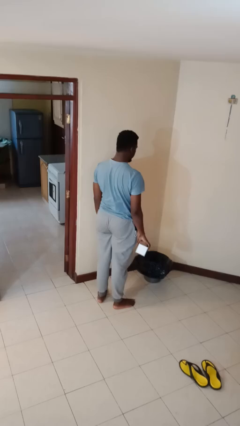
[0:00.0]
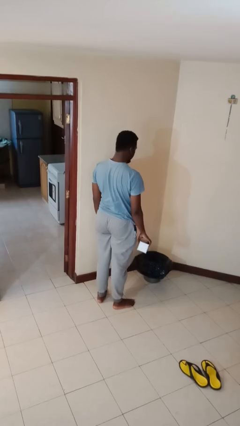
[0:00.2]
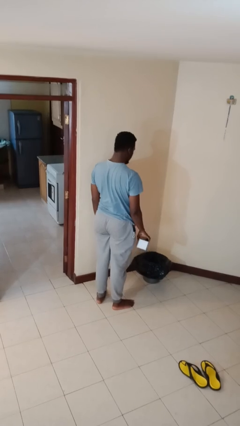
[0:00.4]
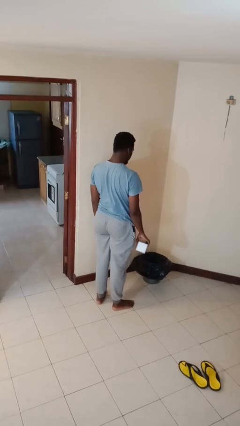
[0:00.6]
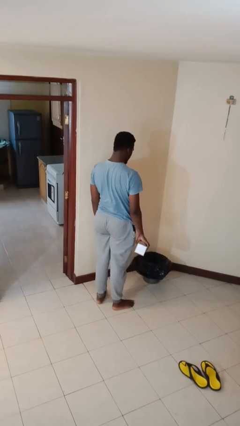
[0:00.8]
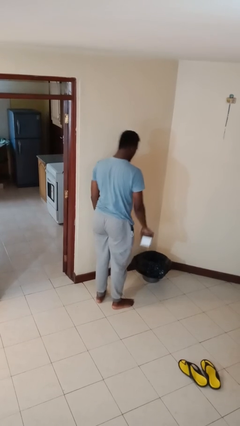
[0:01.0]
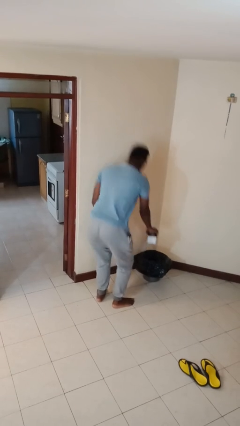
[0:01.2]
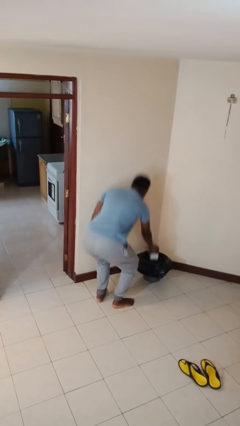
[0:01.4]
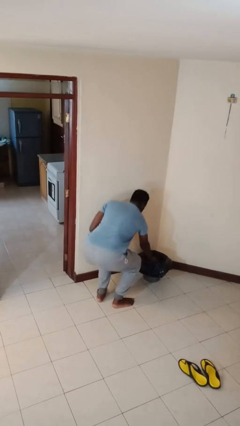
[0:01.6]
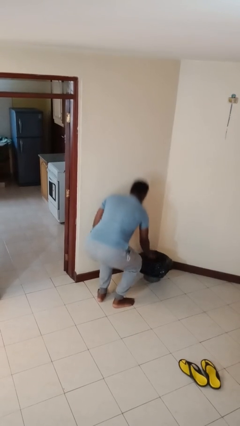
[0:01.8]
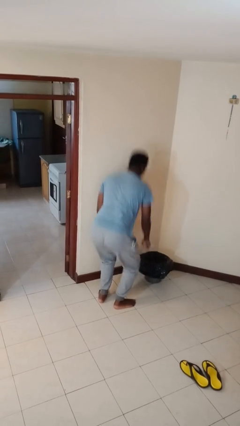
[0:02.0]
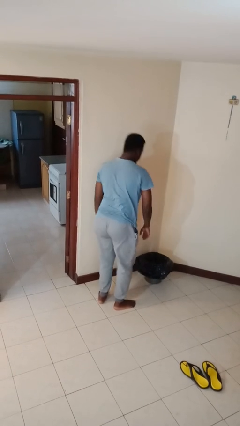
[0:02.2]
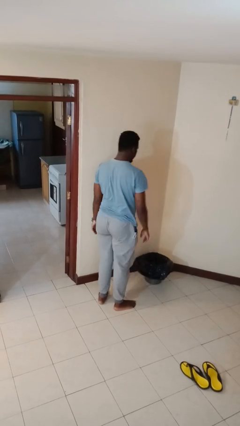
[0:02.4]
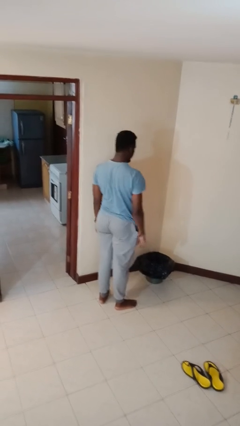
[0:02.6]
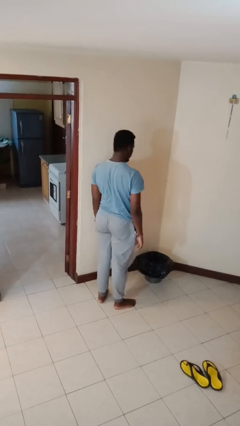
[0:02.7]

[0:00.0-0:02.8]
person discards trash

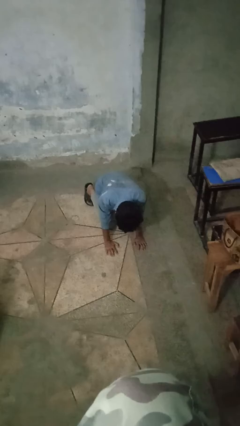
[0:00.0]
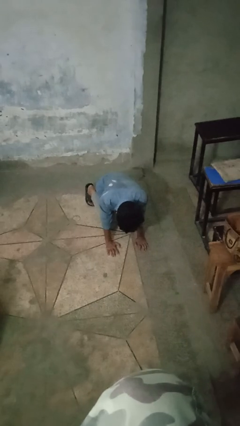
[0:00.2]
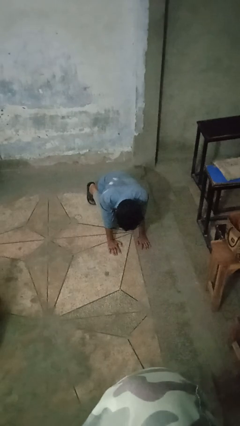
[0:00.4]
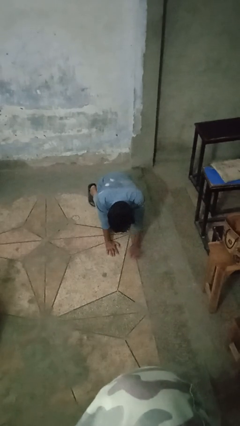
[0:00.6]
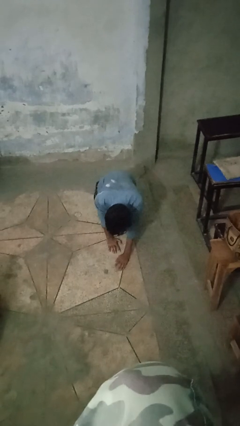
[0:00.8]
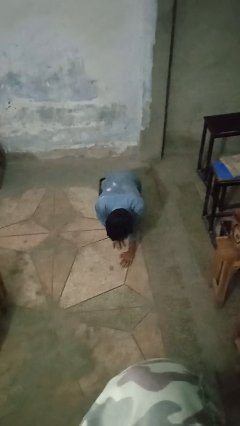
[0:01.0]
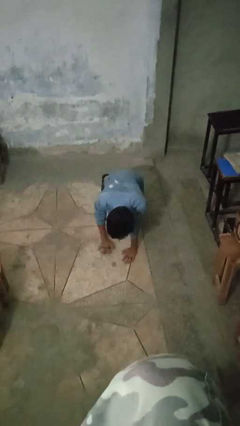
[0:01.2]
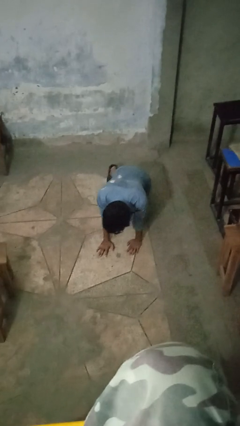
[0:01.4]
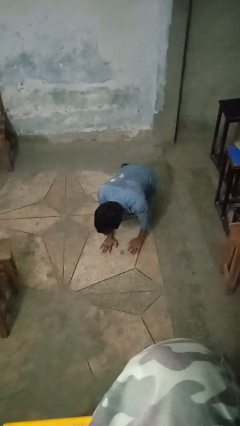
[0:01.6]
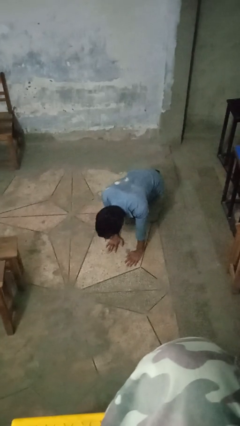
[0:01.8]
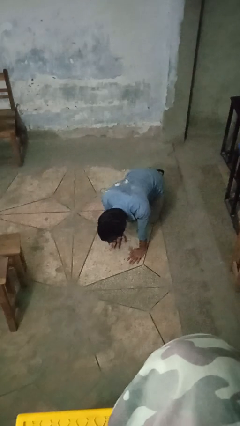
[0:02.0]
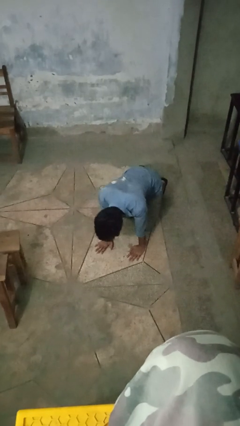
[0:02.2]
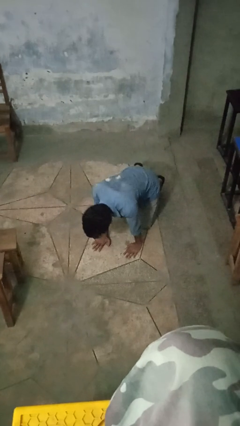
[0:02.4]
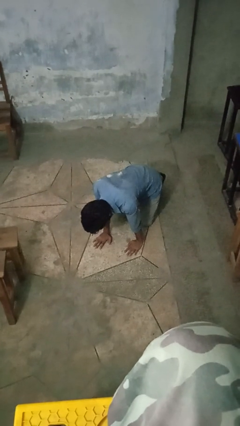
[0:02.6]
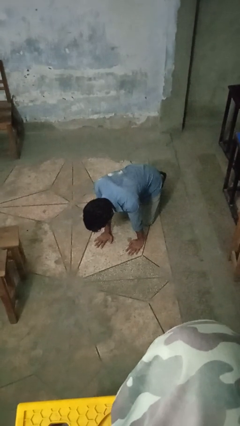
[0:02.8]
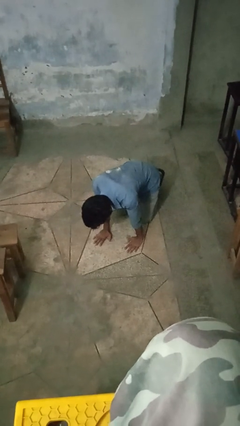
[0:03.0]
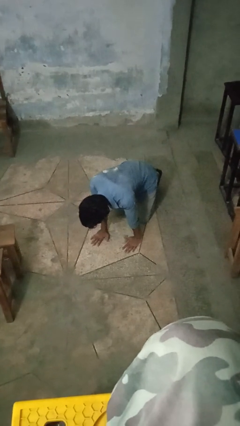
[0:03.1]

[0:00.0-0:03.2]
person crawls

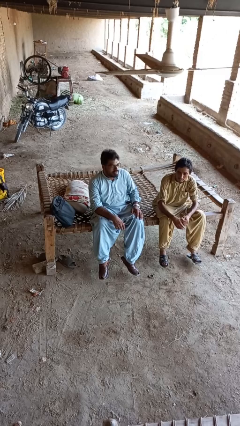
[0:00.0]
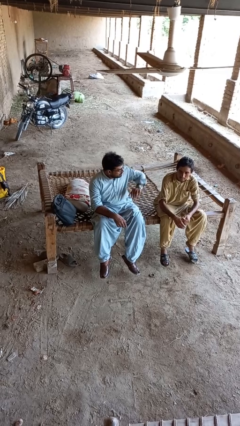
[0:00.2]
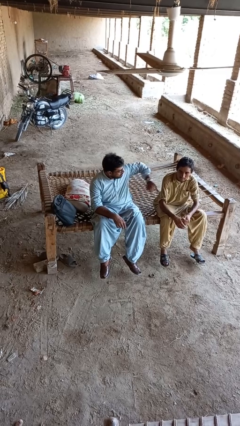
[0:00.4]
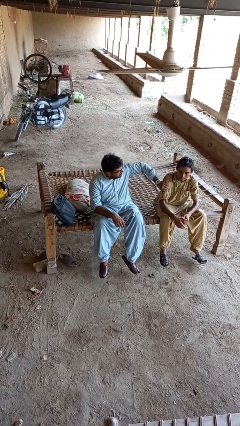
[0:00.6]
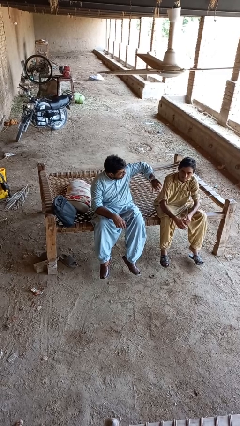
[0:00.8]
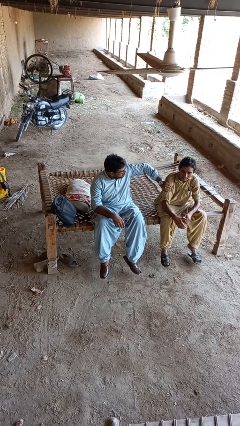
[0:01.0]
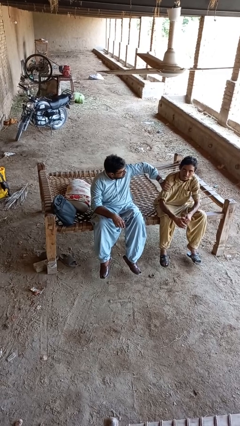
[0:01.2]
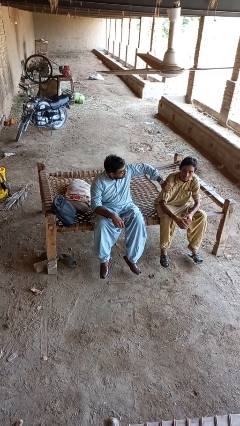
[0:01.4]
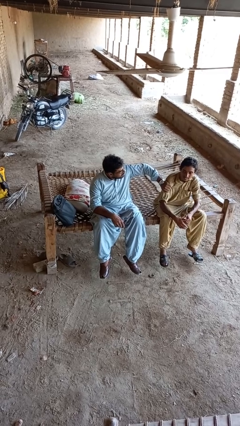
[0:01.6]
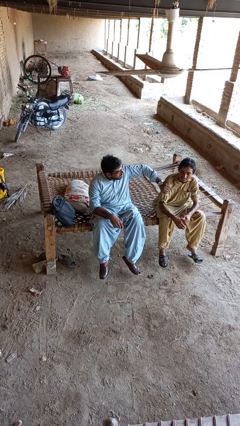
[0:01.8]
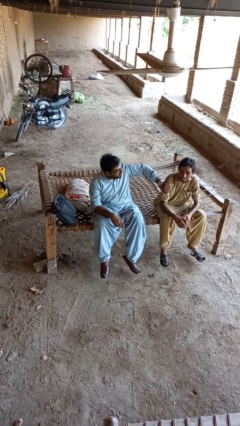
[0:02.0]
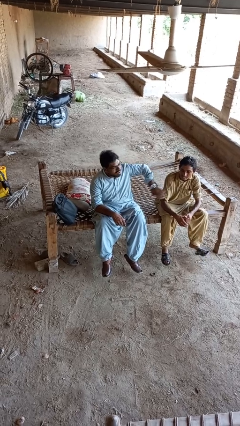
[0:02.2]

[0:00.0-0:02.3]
person grabs person by bicep

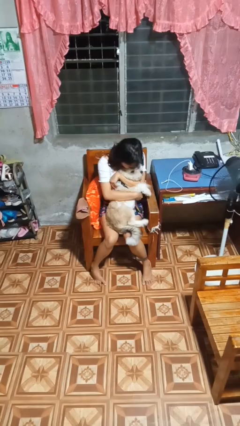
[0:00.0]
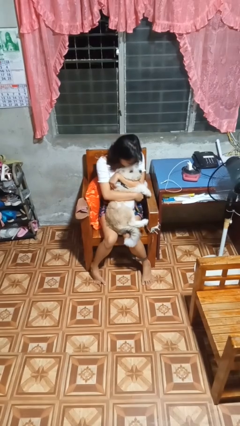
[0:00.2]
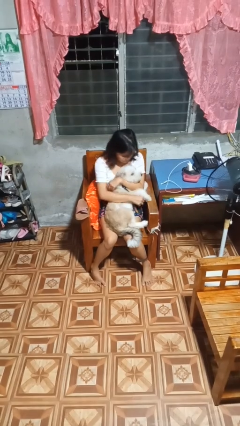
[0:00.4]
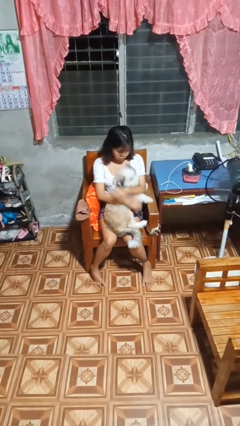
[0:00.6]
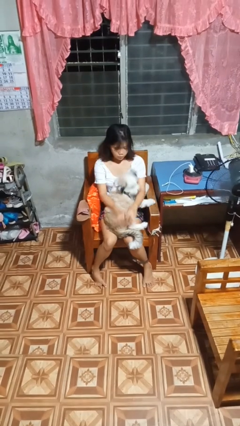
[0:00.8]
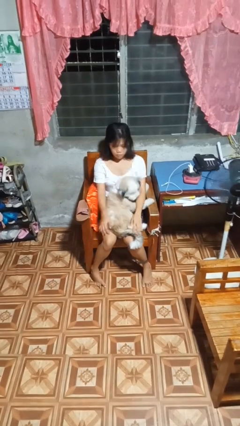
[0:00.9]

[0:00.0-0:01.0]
person hugs dog

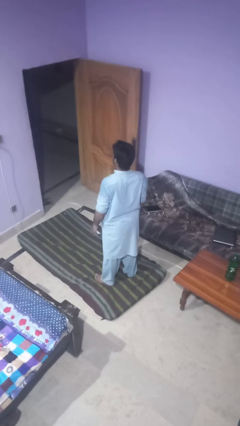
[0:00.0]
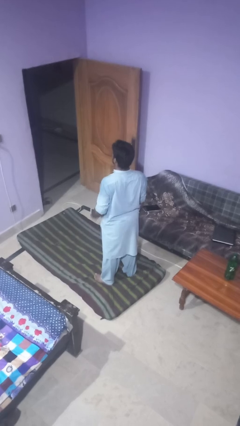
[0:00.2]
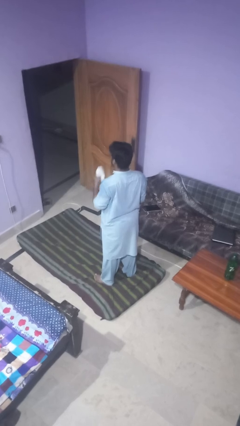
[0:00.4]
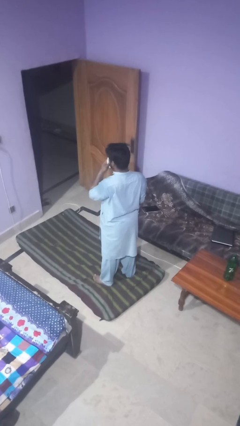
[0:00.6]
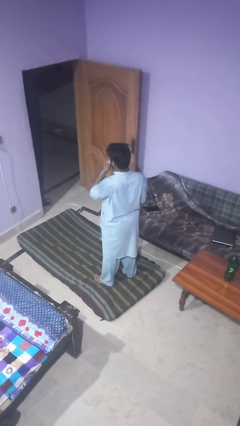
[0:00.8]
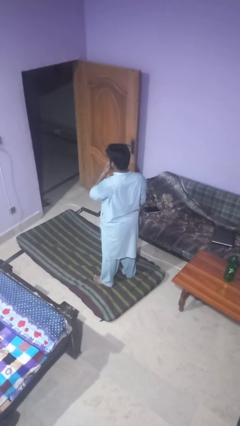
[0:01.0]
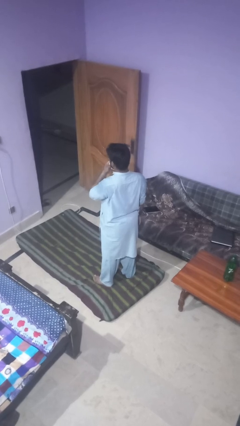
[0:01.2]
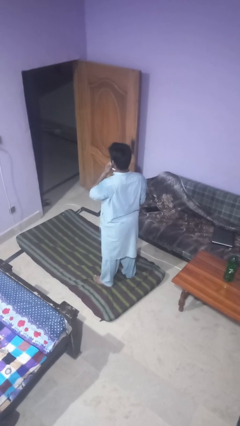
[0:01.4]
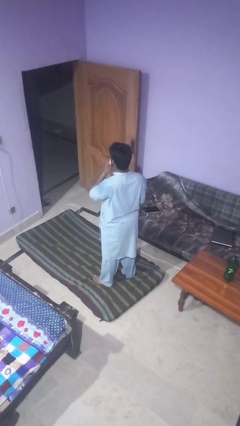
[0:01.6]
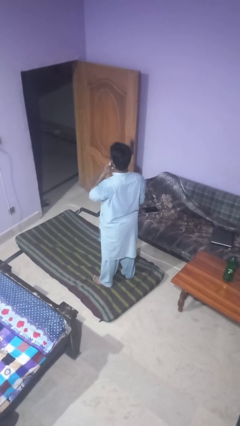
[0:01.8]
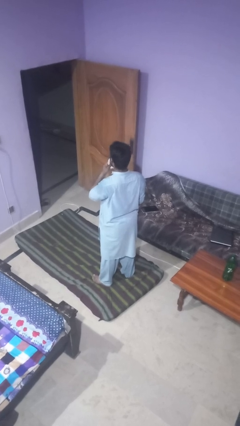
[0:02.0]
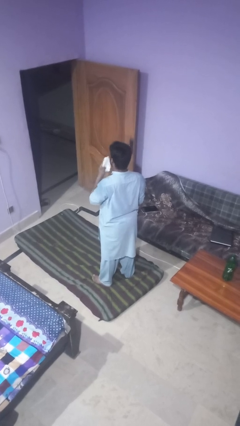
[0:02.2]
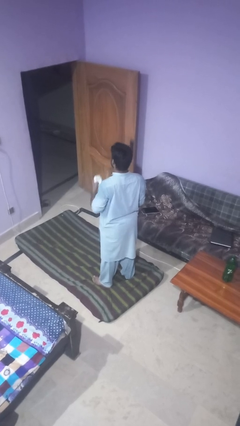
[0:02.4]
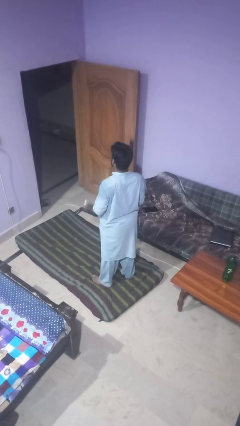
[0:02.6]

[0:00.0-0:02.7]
person wipes mouth with napkin

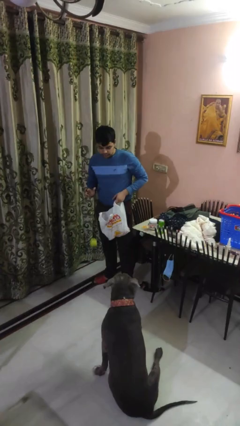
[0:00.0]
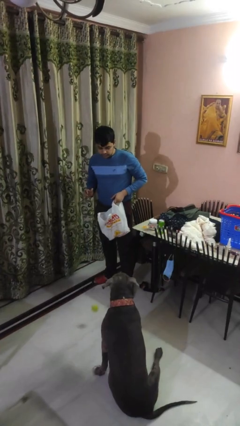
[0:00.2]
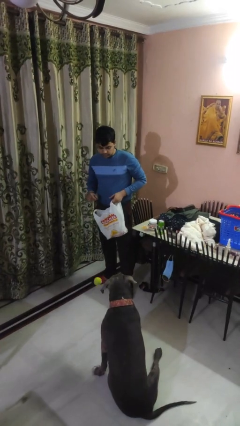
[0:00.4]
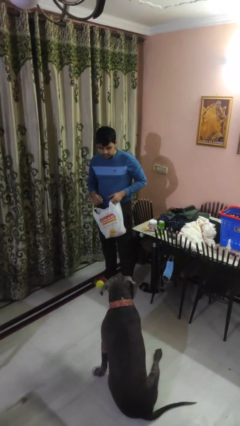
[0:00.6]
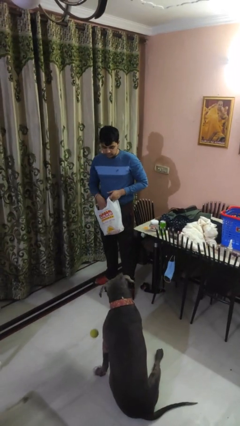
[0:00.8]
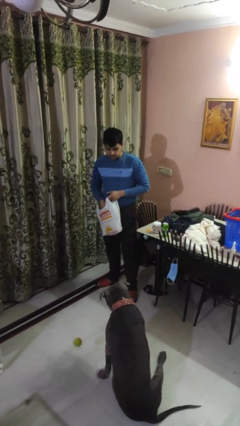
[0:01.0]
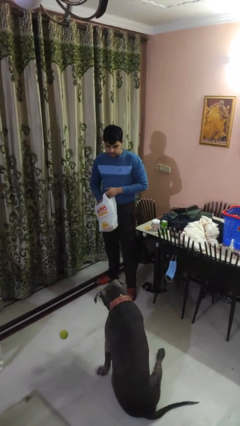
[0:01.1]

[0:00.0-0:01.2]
person throws object to dog

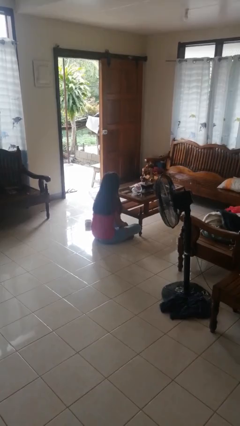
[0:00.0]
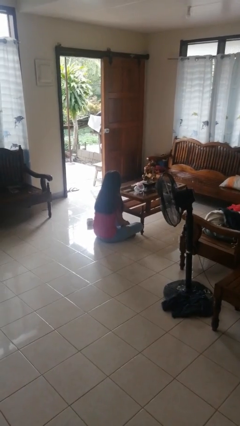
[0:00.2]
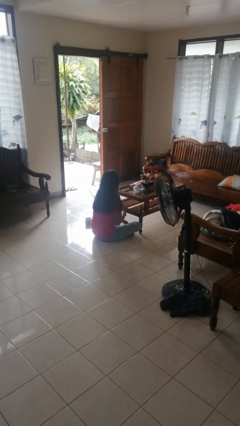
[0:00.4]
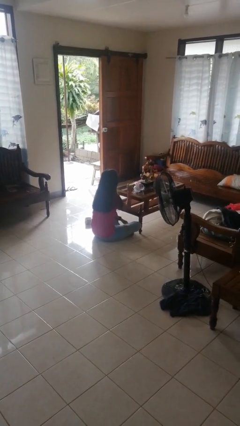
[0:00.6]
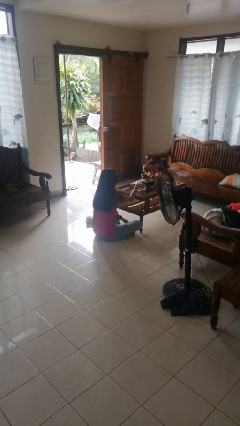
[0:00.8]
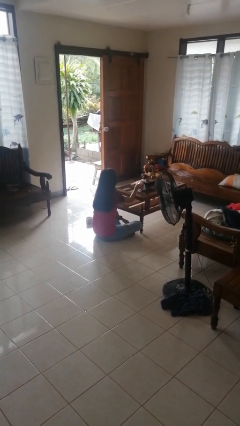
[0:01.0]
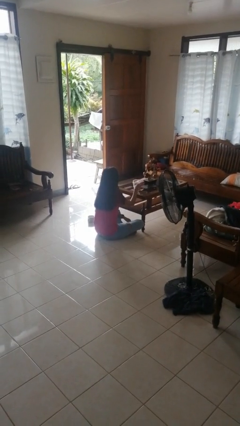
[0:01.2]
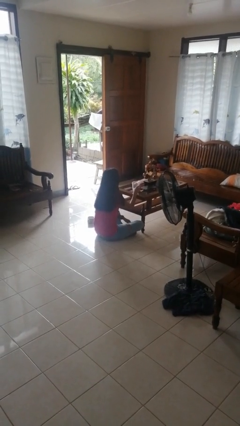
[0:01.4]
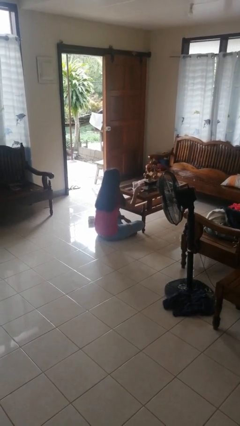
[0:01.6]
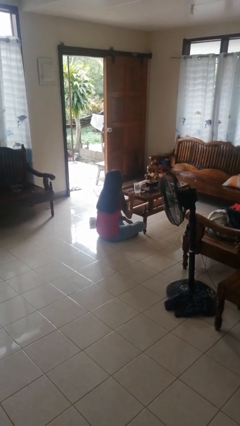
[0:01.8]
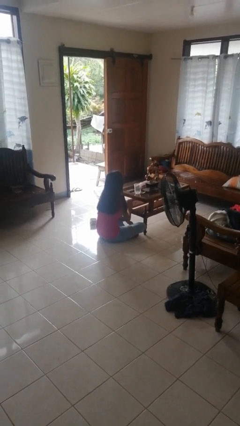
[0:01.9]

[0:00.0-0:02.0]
person sets upright glass

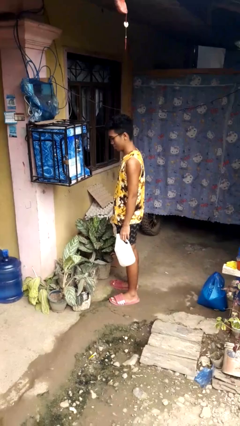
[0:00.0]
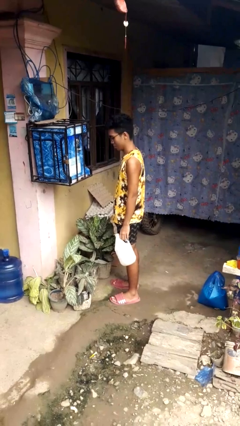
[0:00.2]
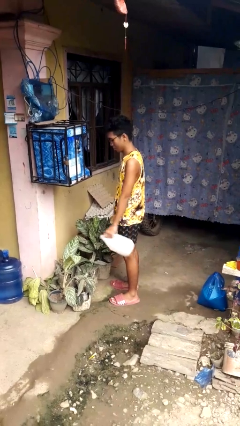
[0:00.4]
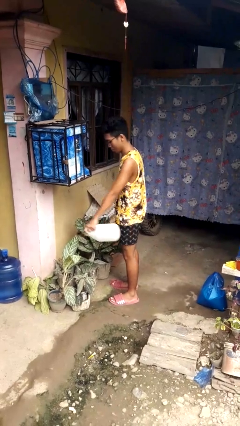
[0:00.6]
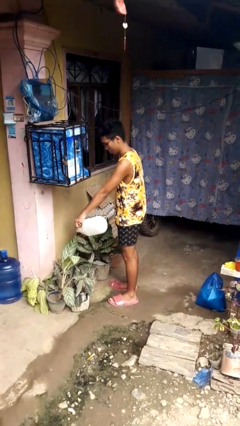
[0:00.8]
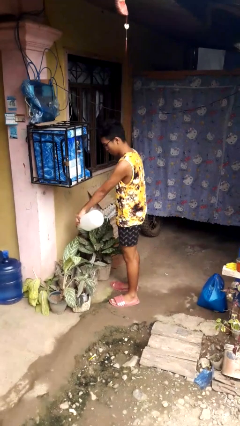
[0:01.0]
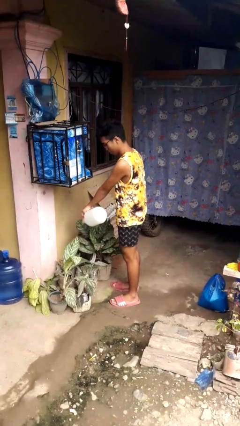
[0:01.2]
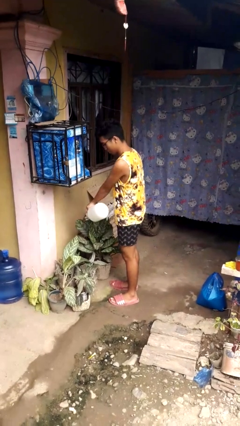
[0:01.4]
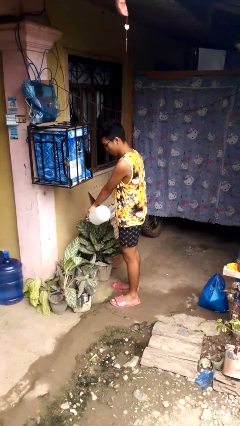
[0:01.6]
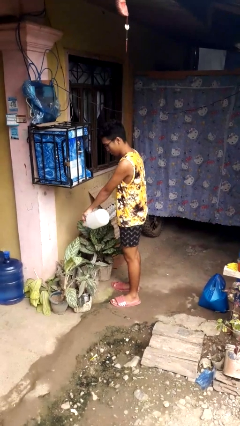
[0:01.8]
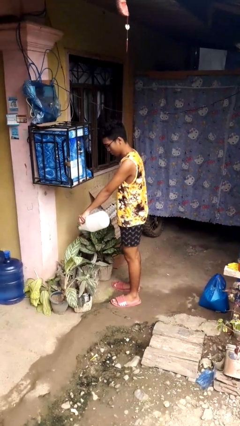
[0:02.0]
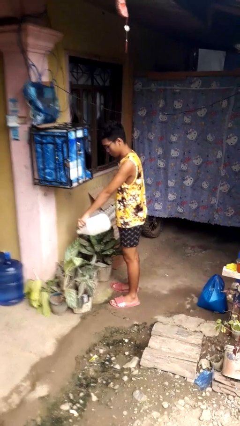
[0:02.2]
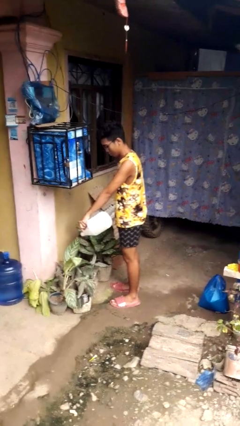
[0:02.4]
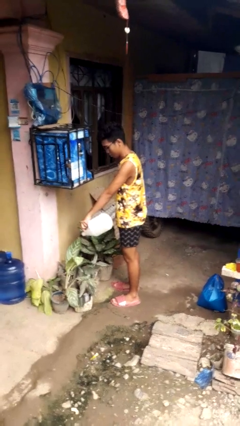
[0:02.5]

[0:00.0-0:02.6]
person waters houseplant
